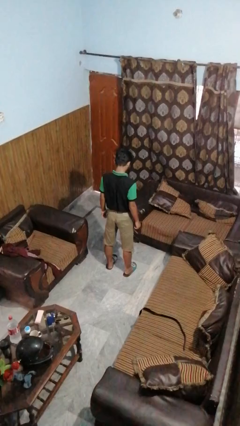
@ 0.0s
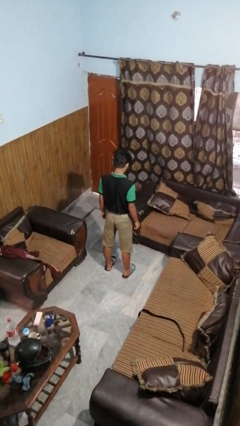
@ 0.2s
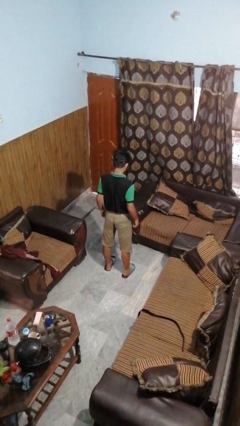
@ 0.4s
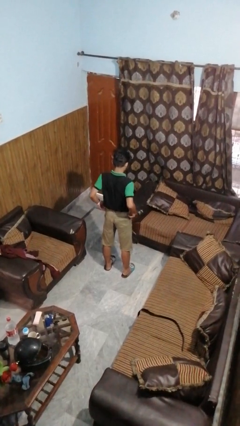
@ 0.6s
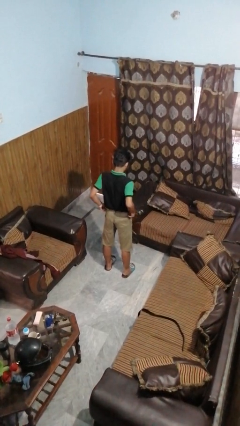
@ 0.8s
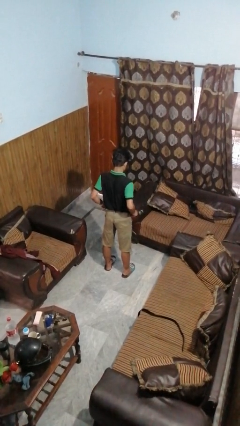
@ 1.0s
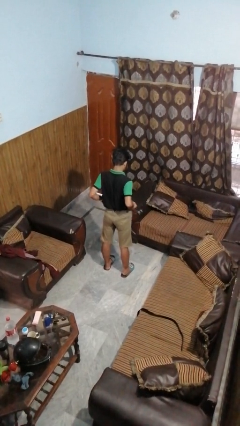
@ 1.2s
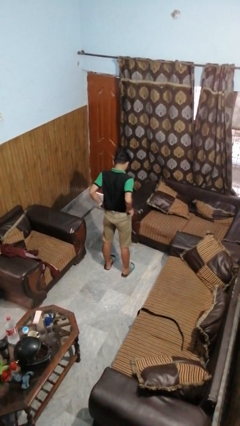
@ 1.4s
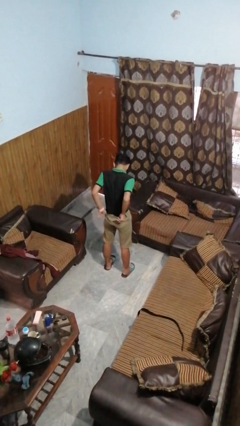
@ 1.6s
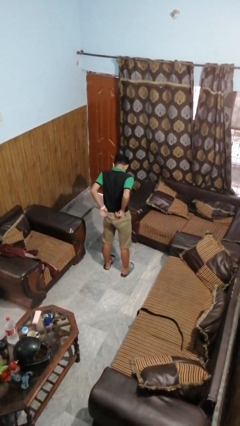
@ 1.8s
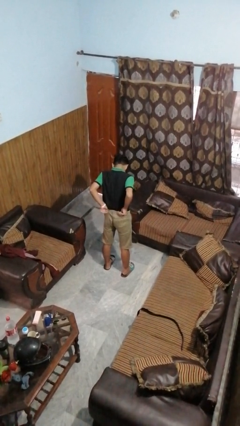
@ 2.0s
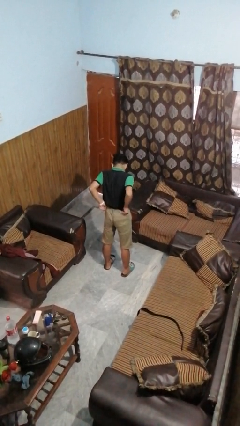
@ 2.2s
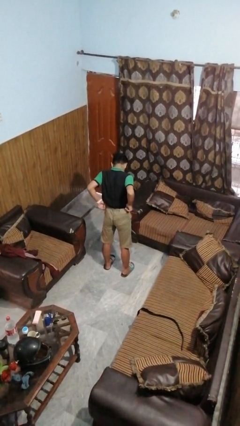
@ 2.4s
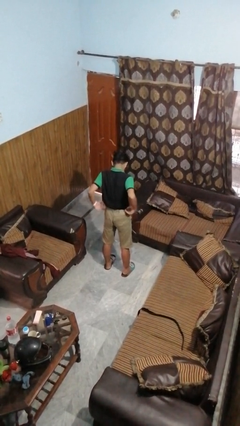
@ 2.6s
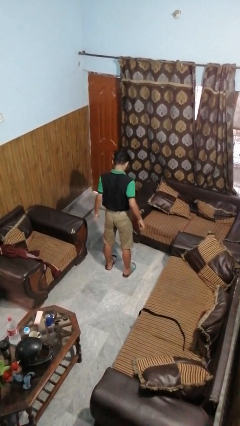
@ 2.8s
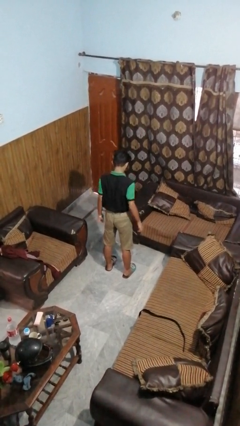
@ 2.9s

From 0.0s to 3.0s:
person hikes up pants

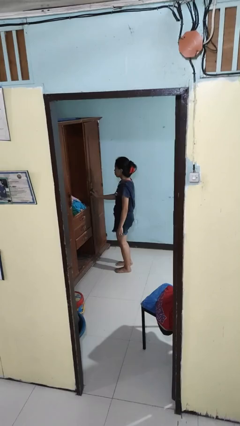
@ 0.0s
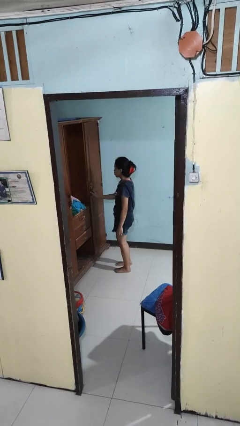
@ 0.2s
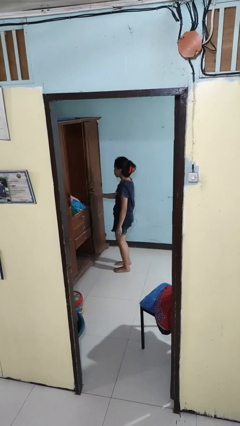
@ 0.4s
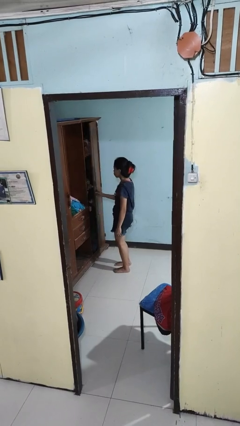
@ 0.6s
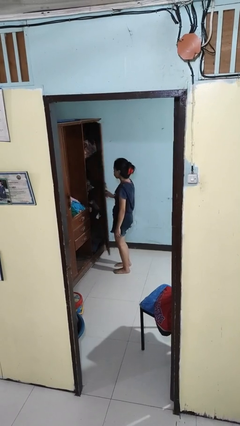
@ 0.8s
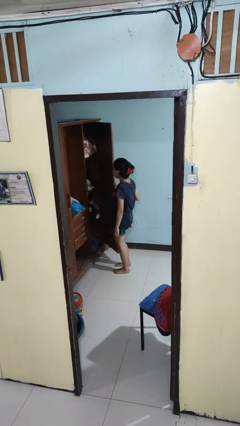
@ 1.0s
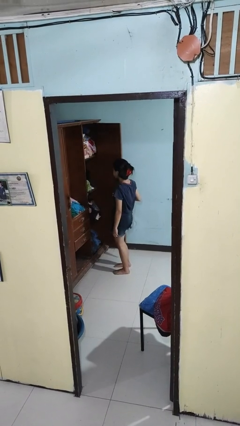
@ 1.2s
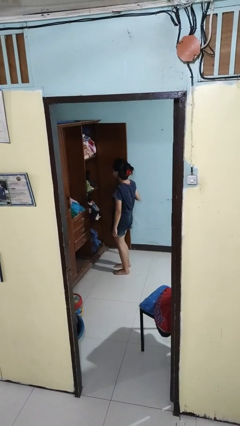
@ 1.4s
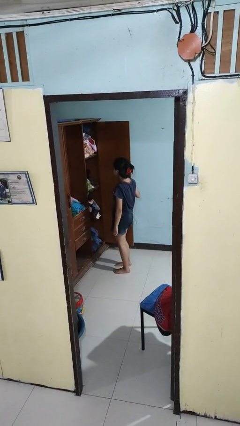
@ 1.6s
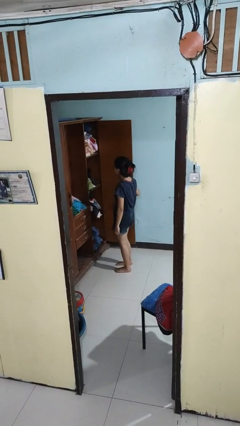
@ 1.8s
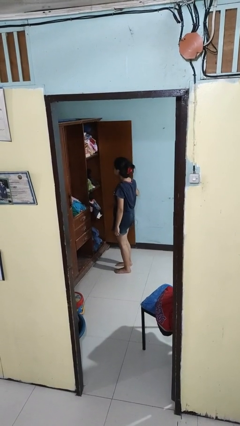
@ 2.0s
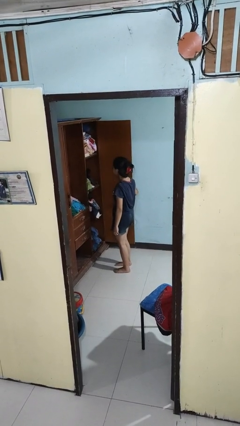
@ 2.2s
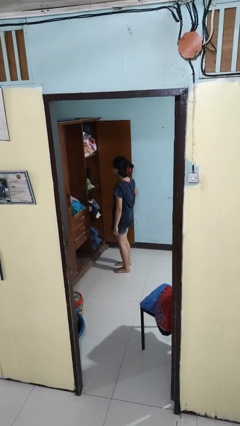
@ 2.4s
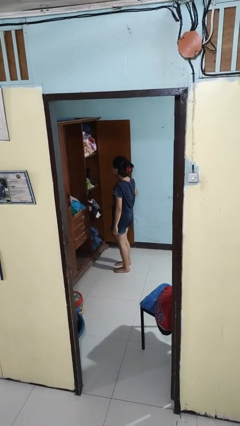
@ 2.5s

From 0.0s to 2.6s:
person opens closet door

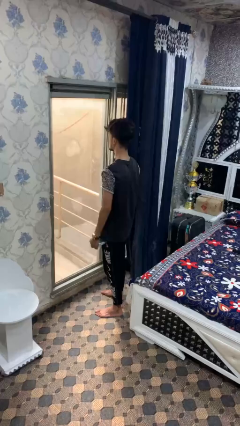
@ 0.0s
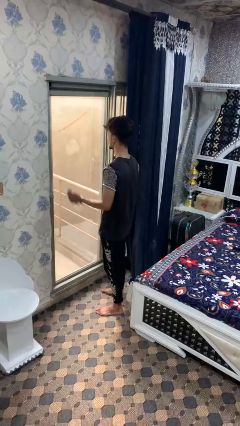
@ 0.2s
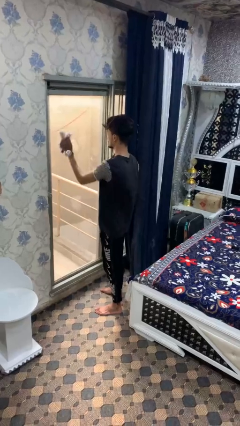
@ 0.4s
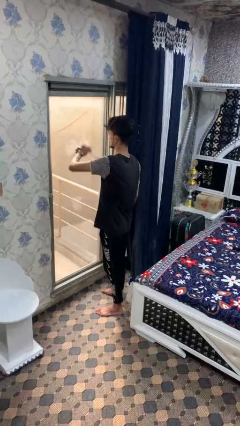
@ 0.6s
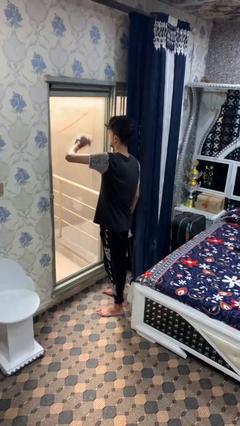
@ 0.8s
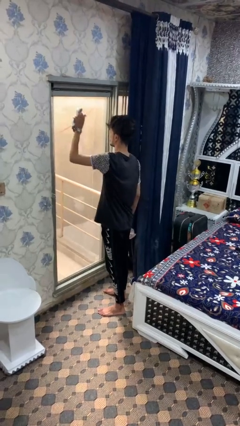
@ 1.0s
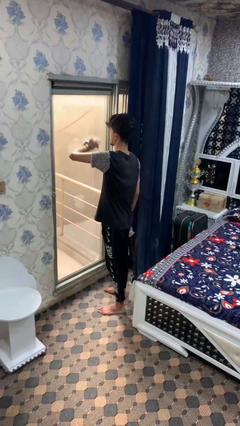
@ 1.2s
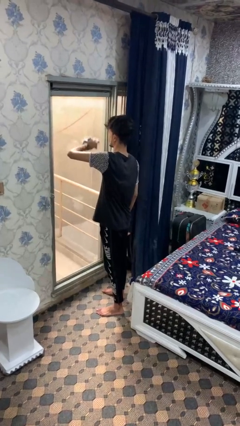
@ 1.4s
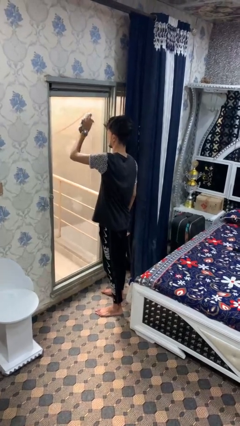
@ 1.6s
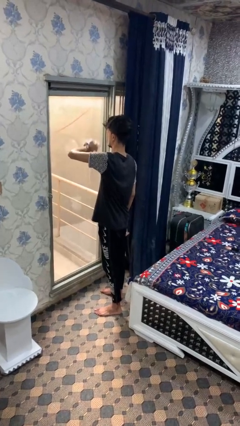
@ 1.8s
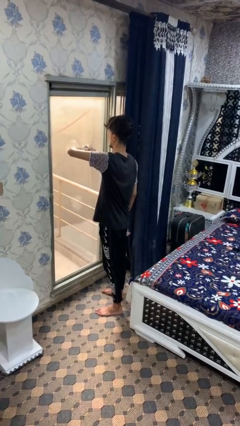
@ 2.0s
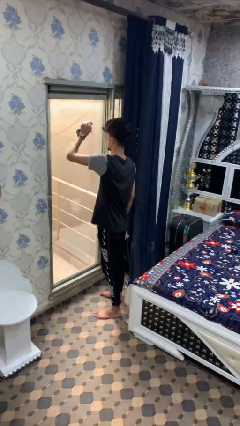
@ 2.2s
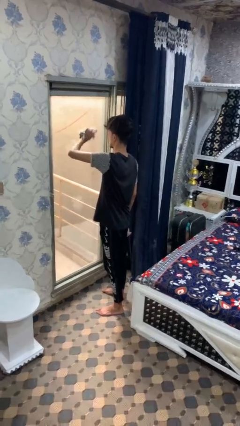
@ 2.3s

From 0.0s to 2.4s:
person washes window

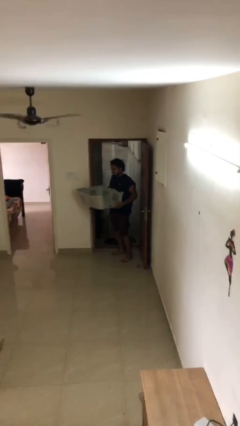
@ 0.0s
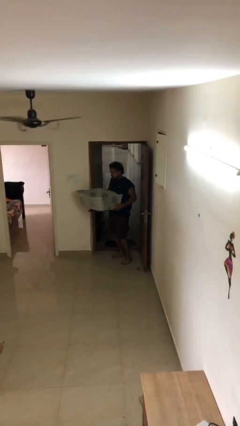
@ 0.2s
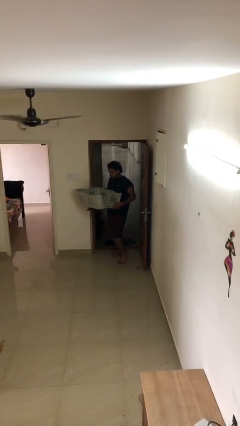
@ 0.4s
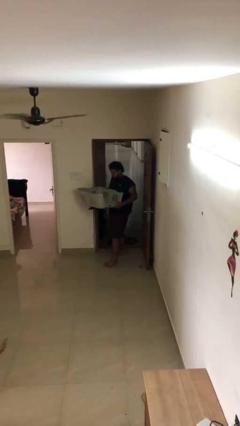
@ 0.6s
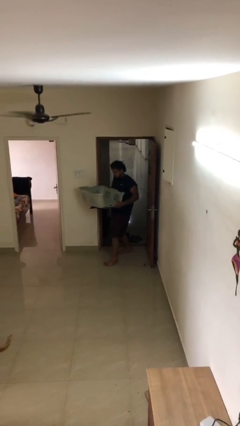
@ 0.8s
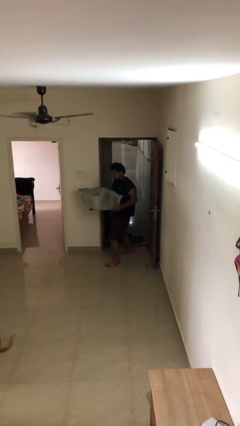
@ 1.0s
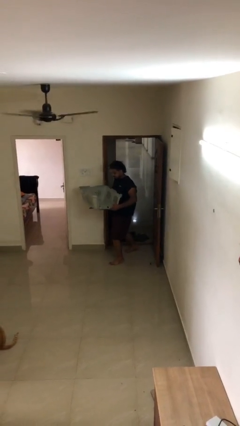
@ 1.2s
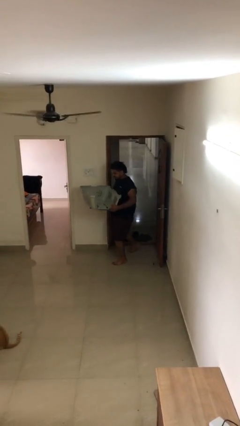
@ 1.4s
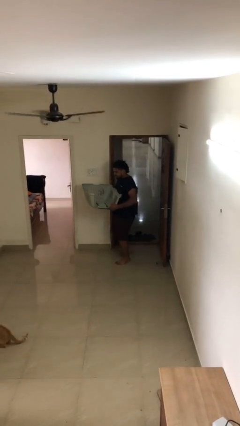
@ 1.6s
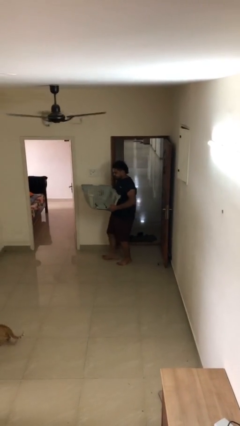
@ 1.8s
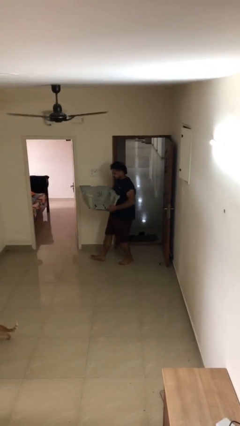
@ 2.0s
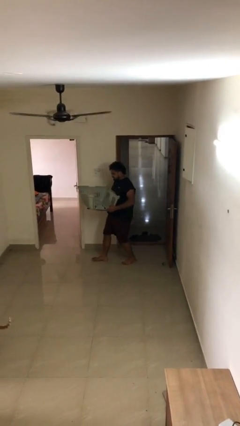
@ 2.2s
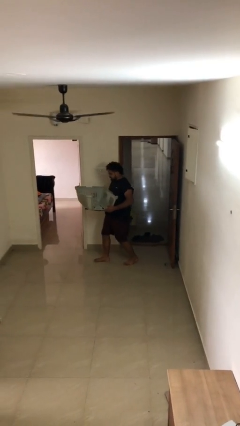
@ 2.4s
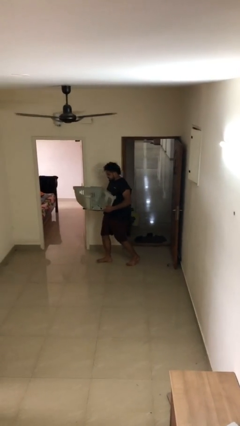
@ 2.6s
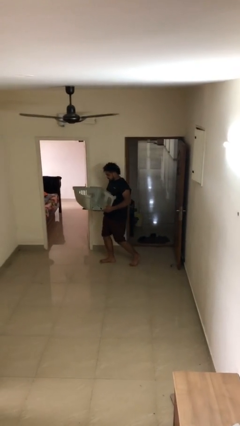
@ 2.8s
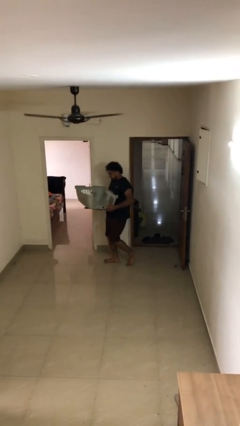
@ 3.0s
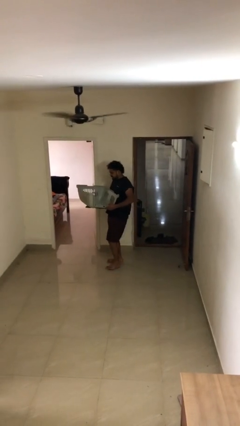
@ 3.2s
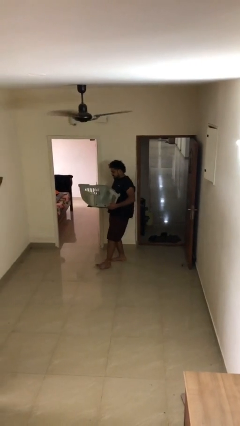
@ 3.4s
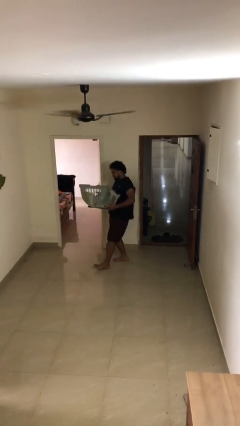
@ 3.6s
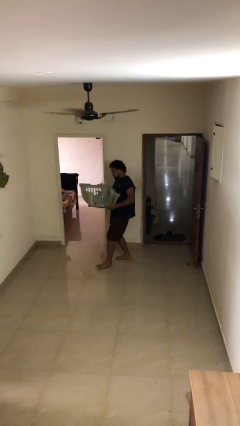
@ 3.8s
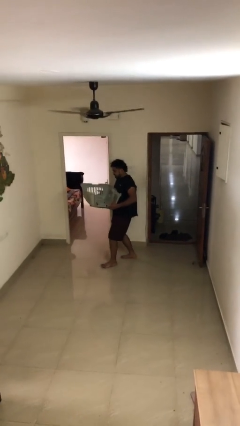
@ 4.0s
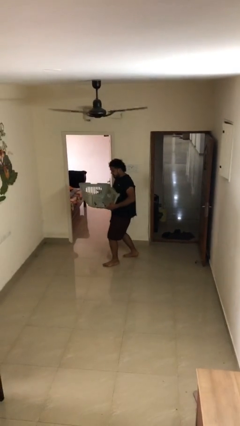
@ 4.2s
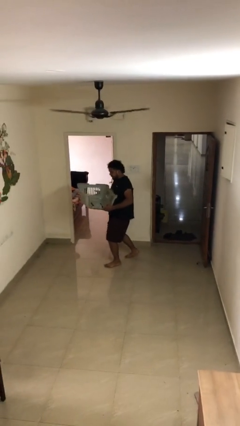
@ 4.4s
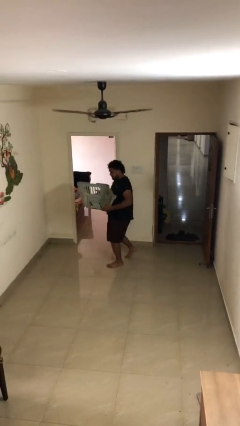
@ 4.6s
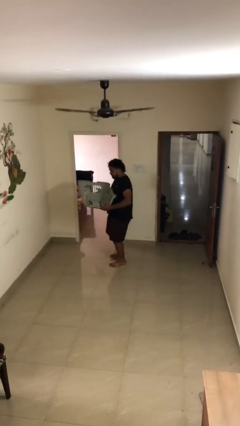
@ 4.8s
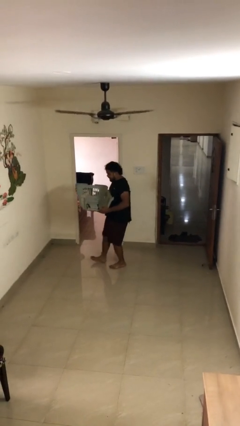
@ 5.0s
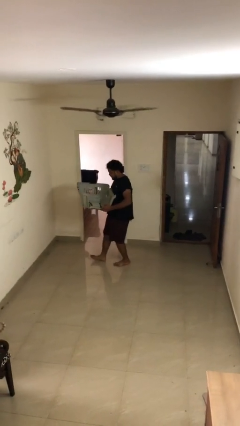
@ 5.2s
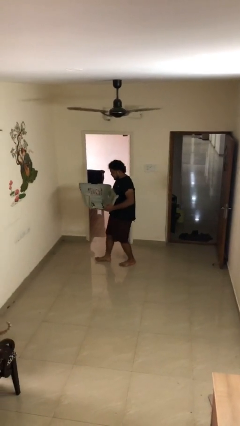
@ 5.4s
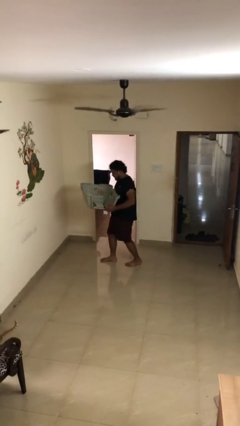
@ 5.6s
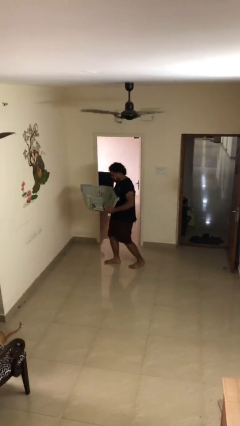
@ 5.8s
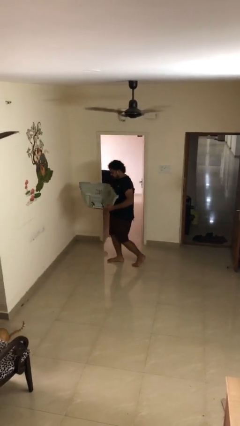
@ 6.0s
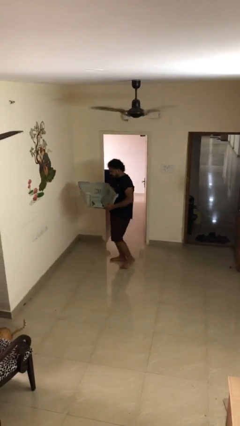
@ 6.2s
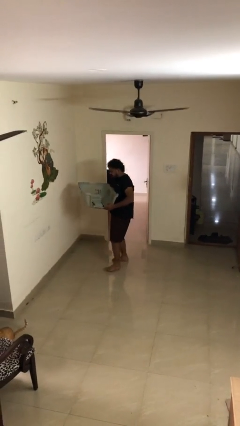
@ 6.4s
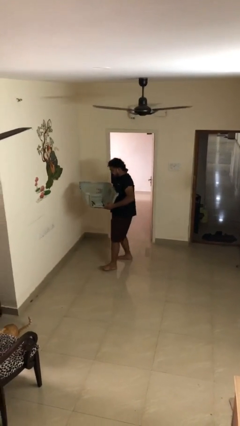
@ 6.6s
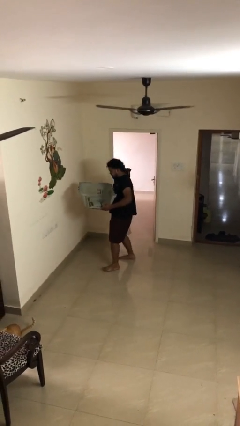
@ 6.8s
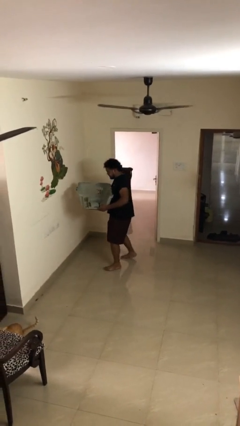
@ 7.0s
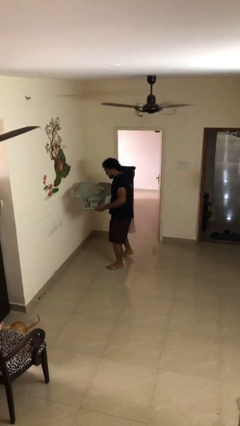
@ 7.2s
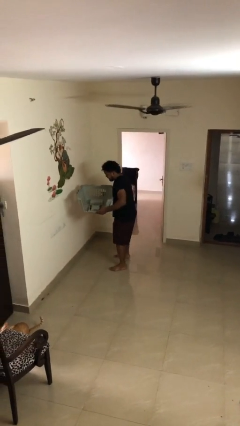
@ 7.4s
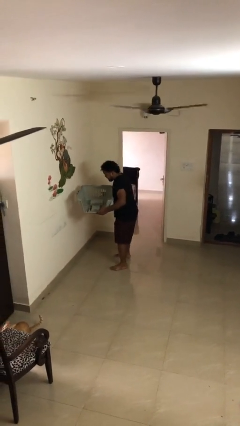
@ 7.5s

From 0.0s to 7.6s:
person carries heavy object

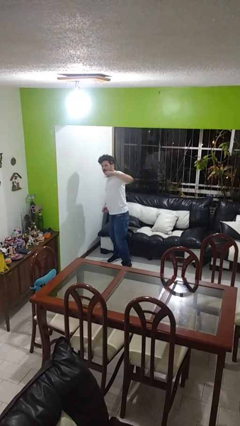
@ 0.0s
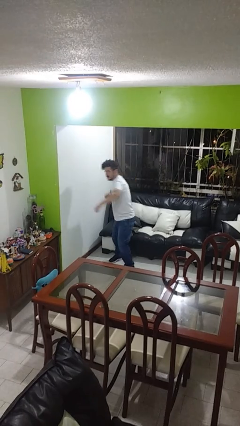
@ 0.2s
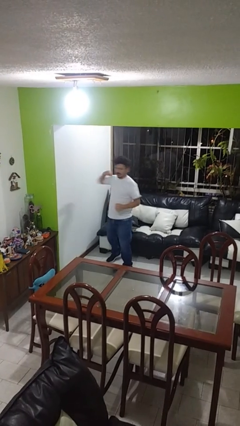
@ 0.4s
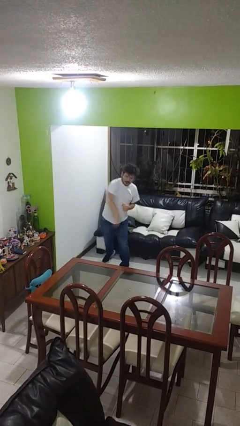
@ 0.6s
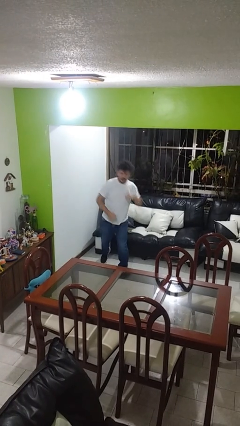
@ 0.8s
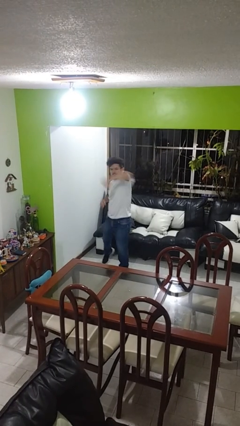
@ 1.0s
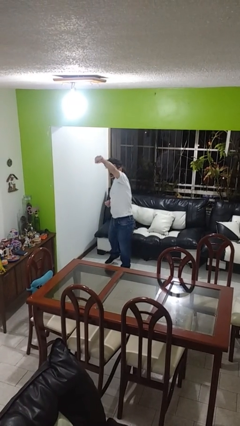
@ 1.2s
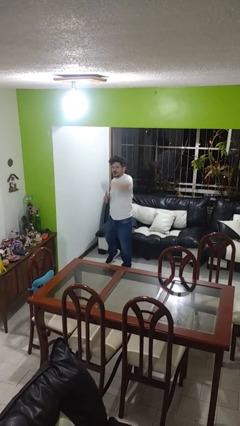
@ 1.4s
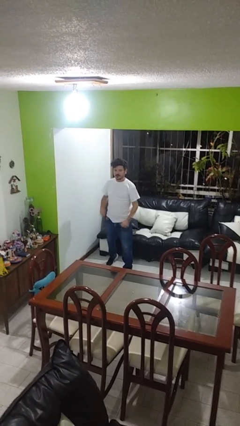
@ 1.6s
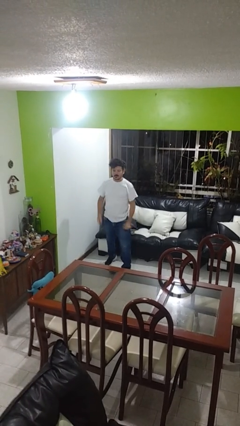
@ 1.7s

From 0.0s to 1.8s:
person punches

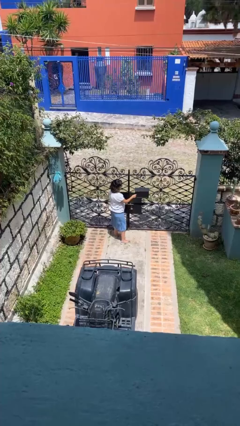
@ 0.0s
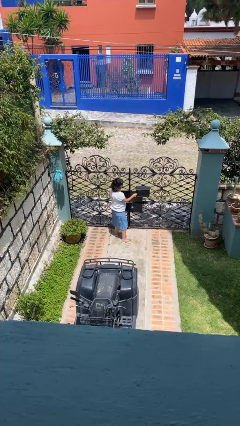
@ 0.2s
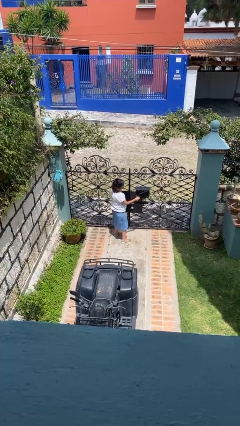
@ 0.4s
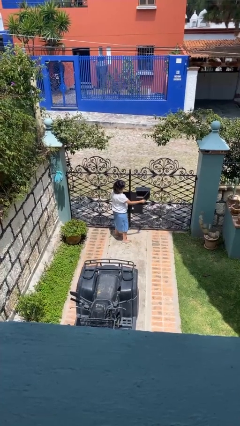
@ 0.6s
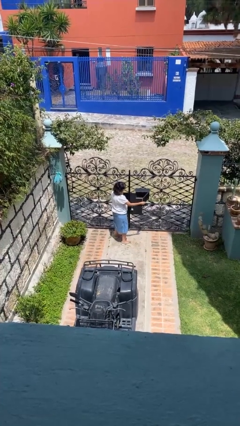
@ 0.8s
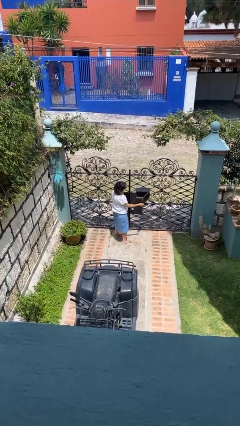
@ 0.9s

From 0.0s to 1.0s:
person opens mailbox
